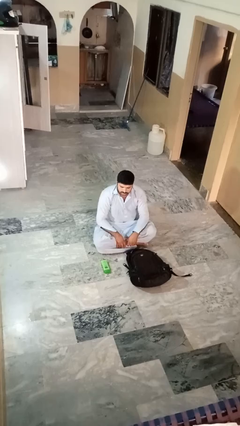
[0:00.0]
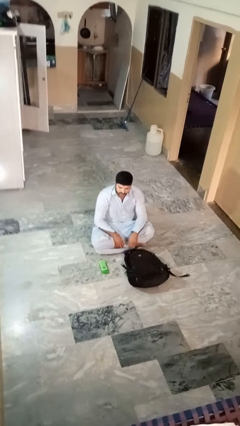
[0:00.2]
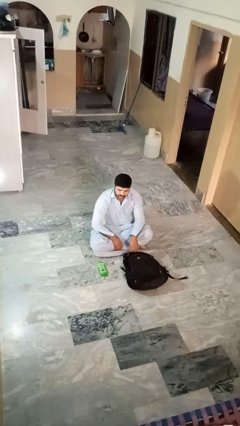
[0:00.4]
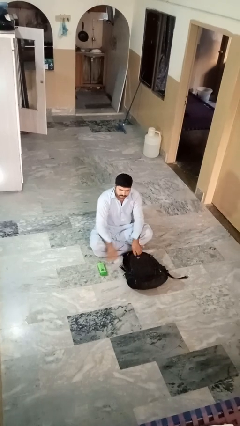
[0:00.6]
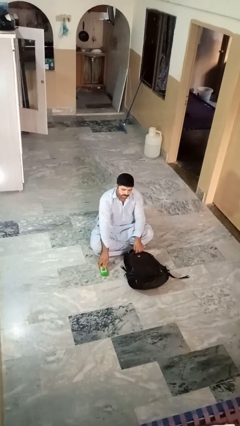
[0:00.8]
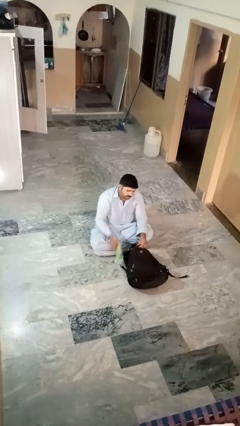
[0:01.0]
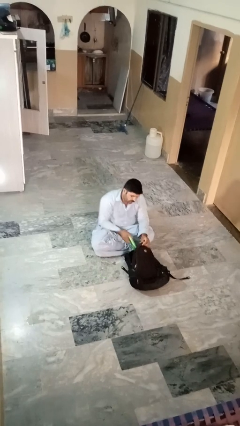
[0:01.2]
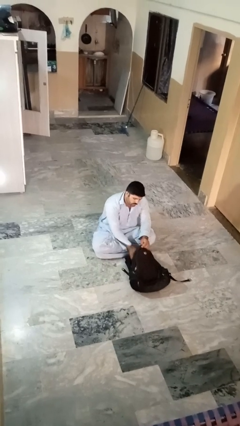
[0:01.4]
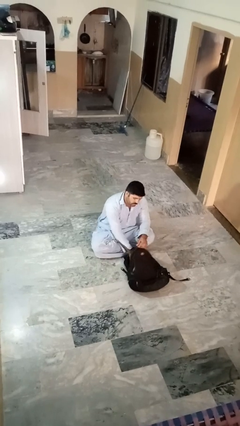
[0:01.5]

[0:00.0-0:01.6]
person puts object into bag

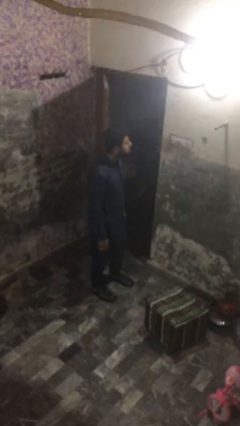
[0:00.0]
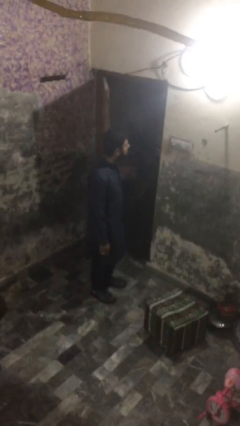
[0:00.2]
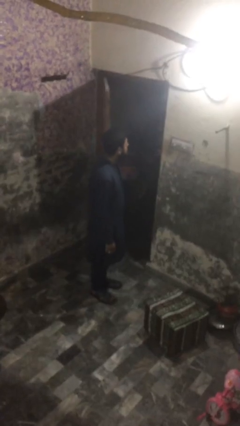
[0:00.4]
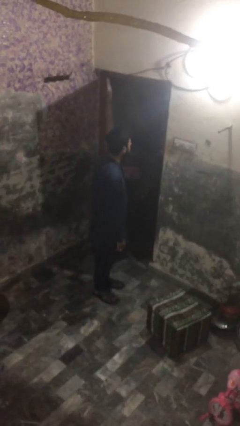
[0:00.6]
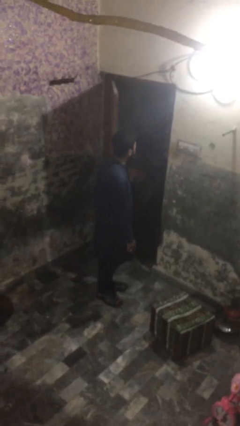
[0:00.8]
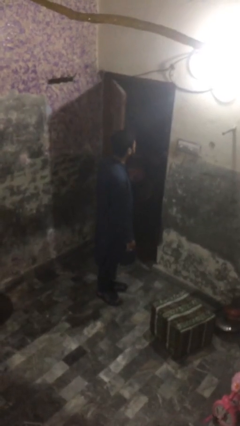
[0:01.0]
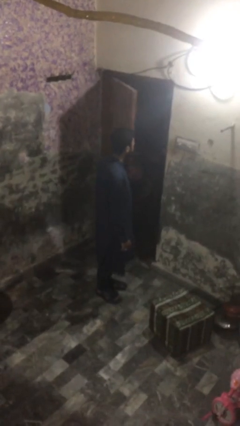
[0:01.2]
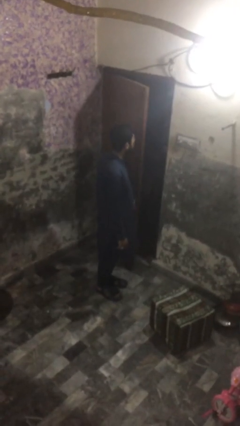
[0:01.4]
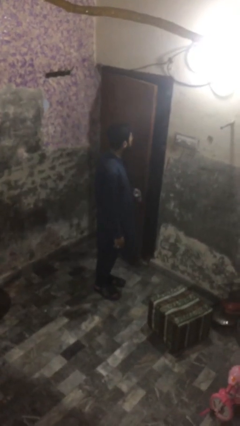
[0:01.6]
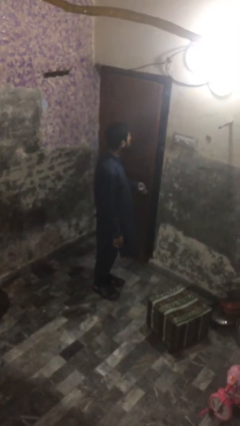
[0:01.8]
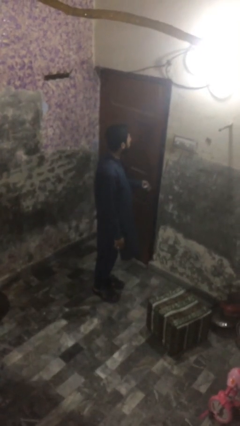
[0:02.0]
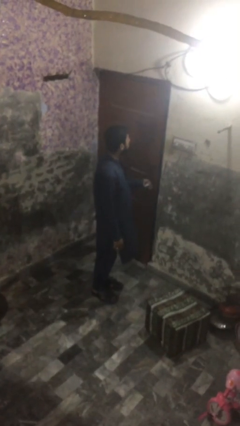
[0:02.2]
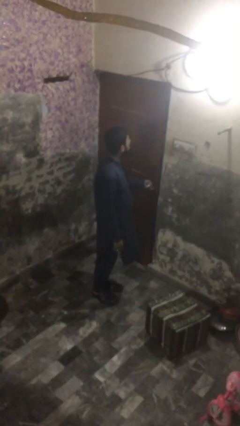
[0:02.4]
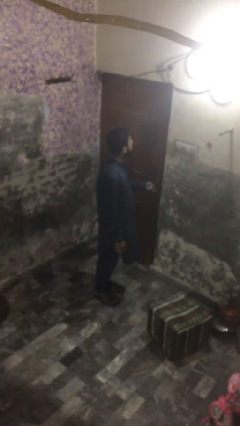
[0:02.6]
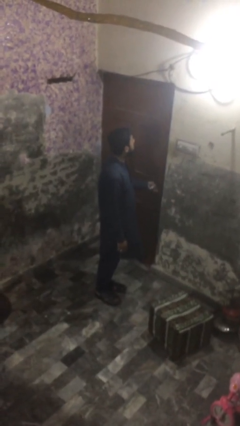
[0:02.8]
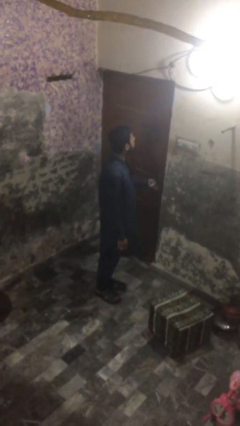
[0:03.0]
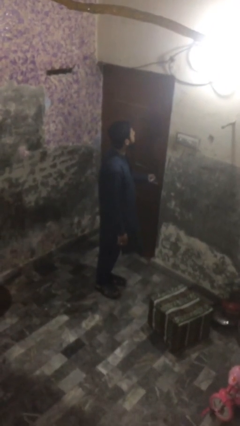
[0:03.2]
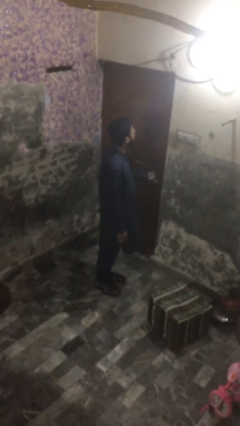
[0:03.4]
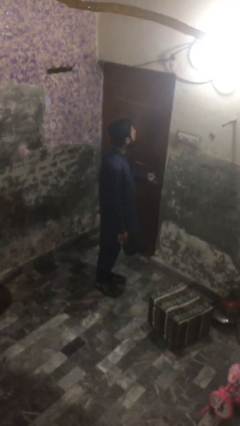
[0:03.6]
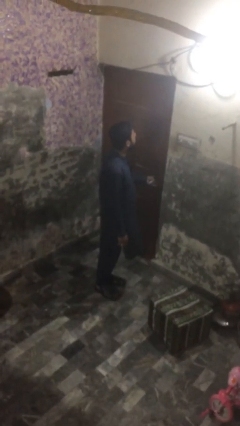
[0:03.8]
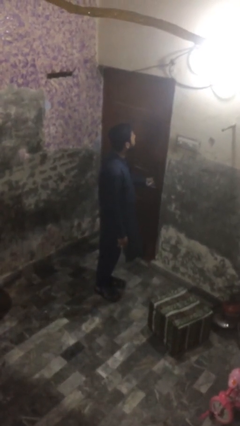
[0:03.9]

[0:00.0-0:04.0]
person closes facility door

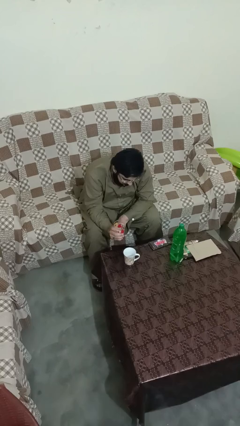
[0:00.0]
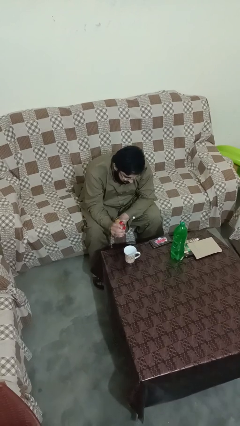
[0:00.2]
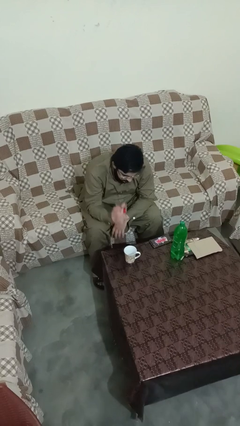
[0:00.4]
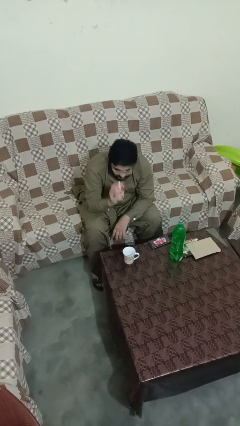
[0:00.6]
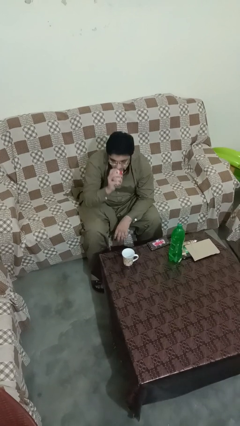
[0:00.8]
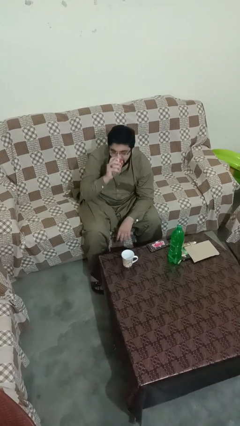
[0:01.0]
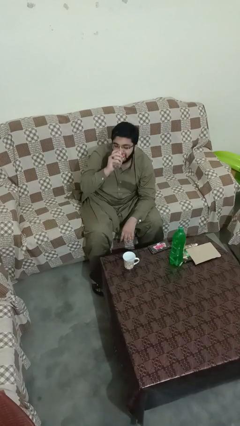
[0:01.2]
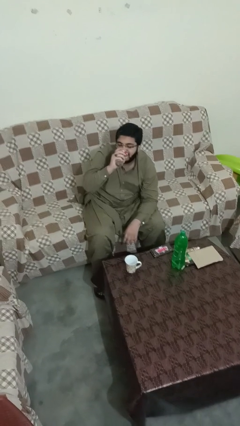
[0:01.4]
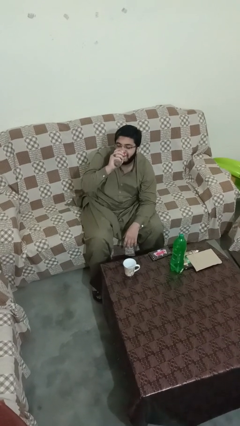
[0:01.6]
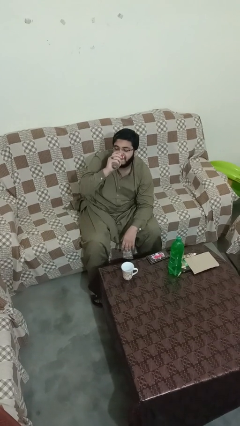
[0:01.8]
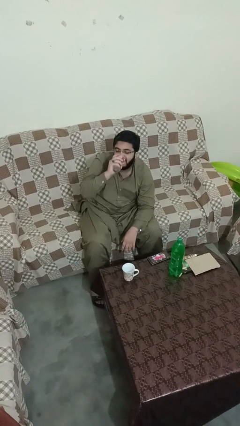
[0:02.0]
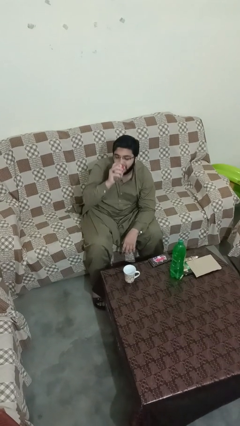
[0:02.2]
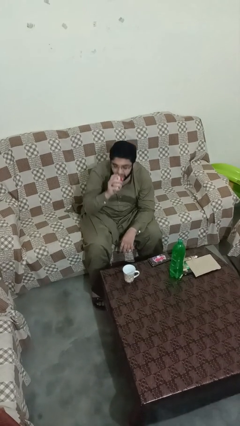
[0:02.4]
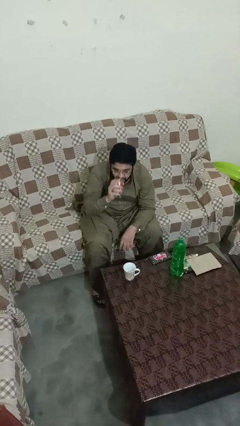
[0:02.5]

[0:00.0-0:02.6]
person drinks from shotglass

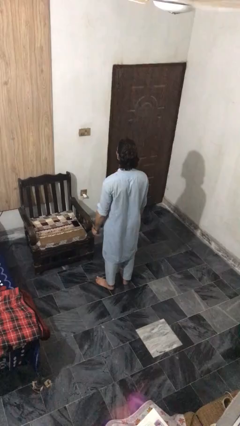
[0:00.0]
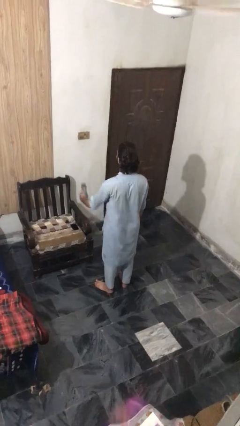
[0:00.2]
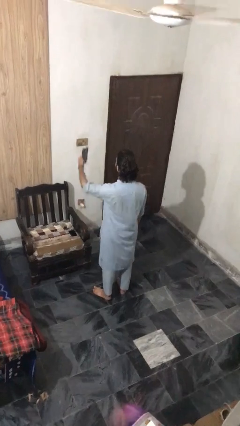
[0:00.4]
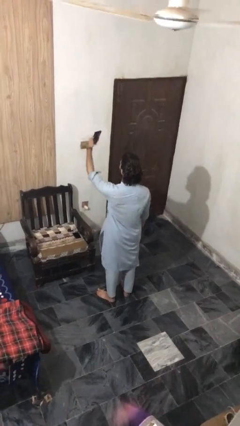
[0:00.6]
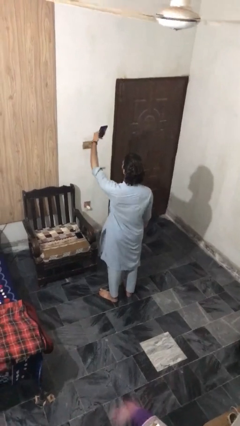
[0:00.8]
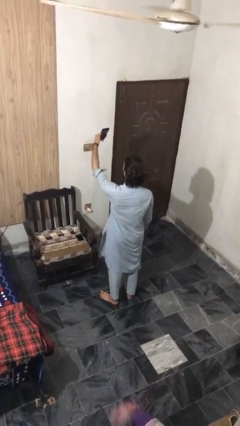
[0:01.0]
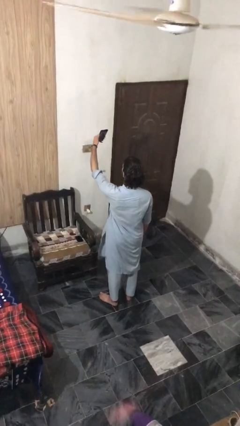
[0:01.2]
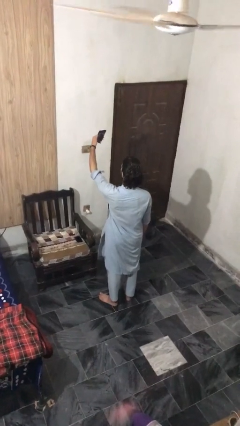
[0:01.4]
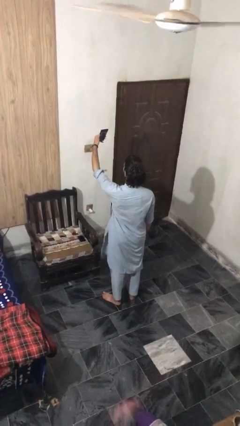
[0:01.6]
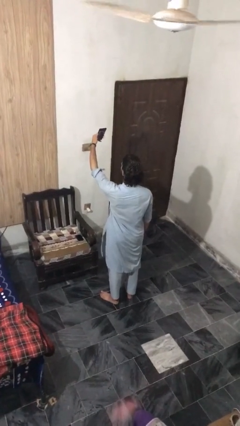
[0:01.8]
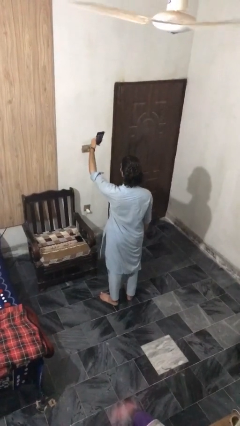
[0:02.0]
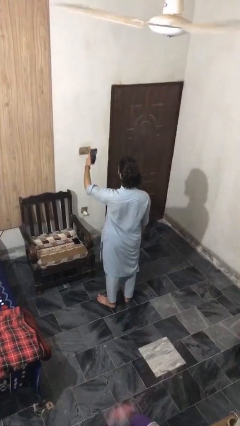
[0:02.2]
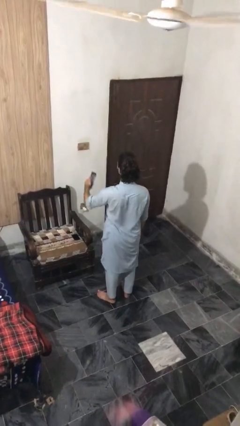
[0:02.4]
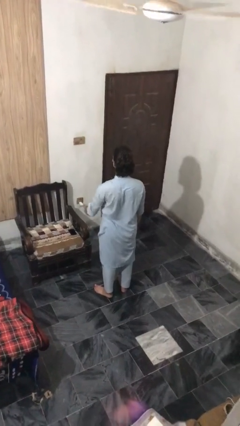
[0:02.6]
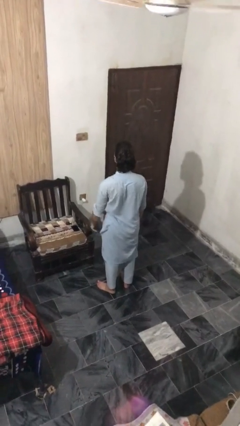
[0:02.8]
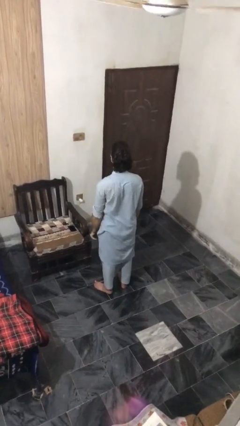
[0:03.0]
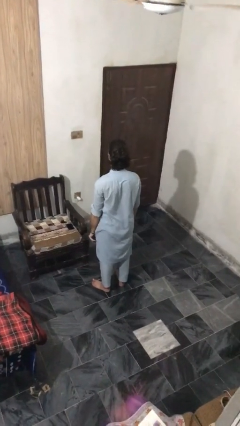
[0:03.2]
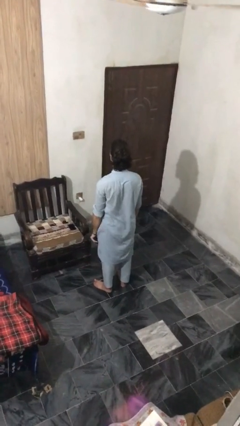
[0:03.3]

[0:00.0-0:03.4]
person takes selfie

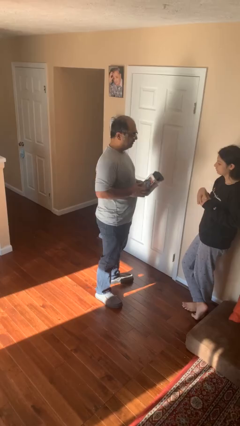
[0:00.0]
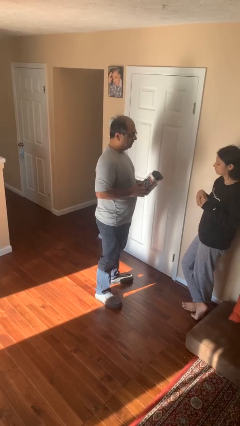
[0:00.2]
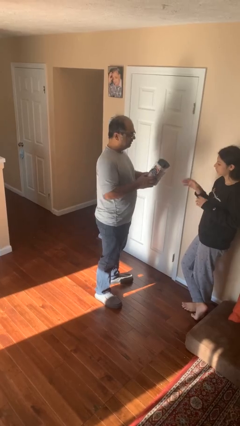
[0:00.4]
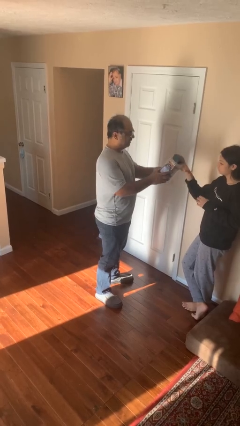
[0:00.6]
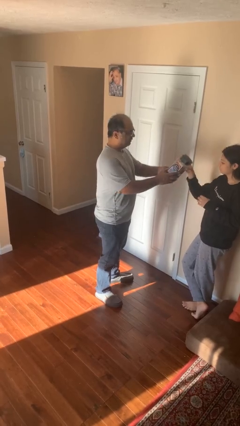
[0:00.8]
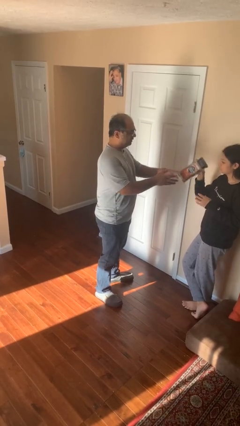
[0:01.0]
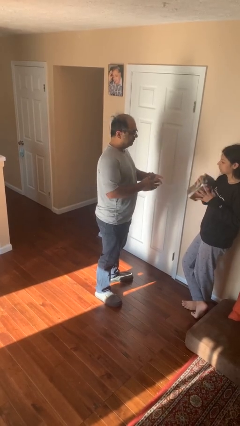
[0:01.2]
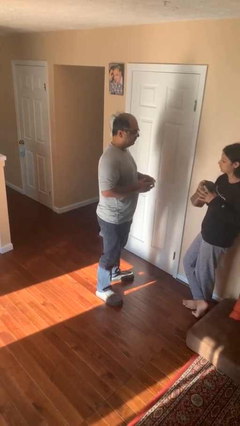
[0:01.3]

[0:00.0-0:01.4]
person transfers object to person

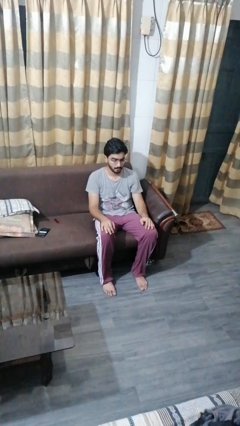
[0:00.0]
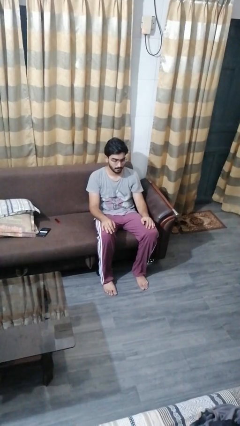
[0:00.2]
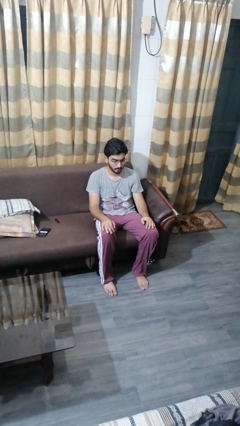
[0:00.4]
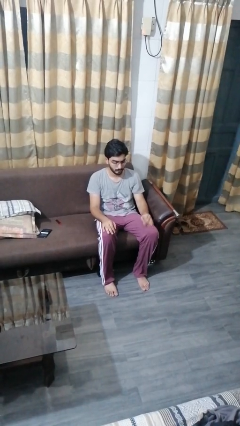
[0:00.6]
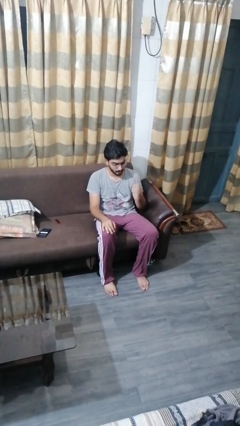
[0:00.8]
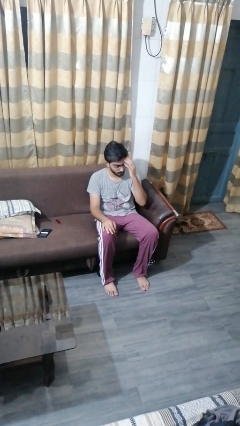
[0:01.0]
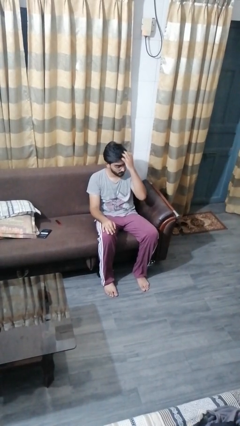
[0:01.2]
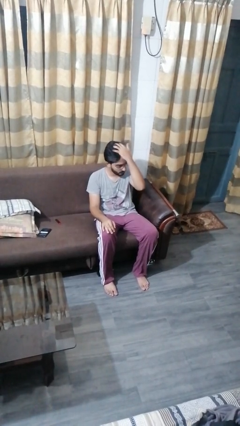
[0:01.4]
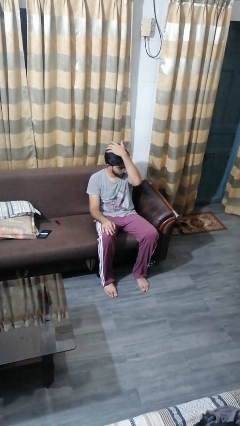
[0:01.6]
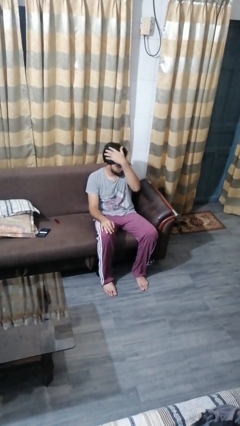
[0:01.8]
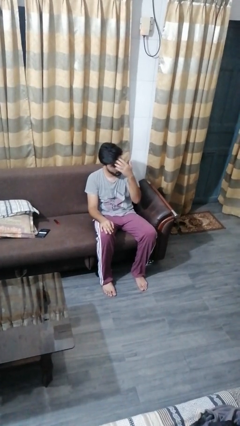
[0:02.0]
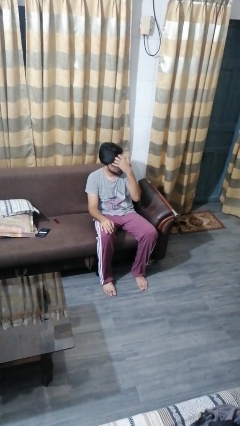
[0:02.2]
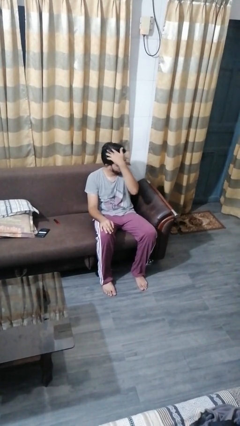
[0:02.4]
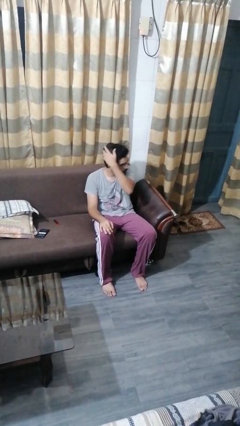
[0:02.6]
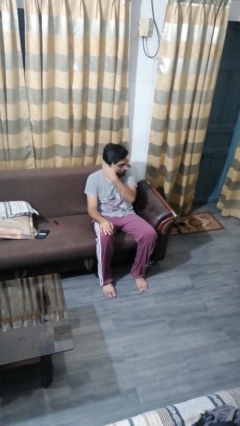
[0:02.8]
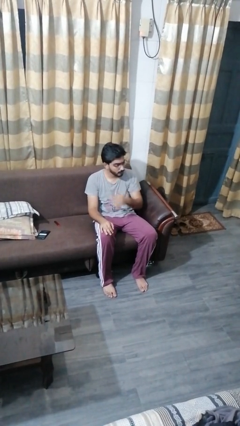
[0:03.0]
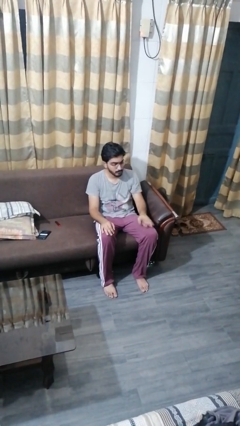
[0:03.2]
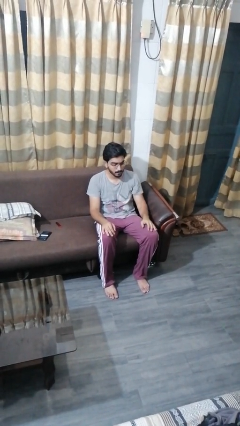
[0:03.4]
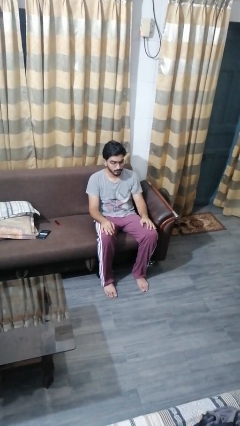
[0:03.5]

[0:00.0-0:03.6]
person strokes hair

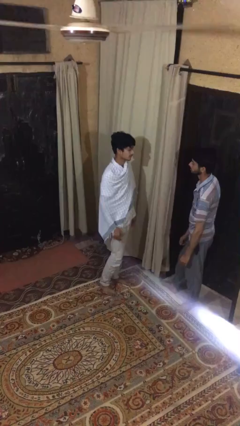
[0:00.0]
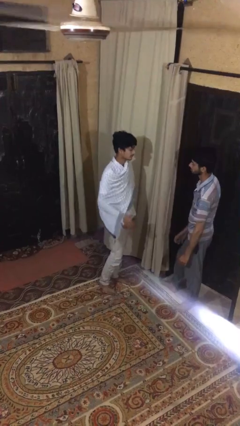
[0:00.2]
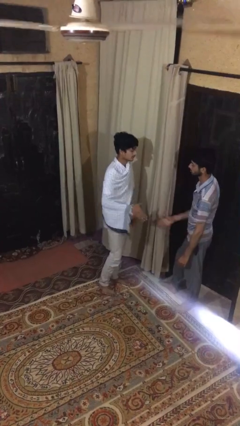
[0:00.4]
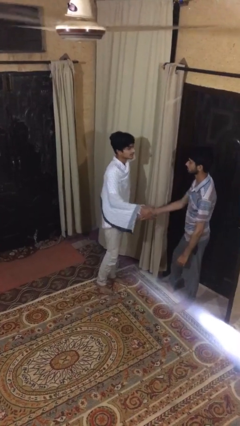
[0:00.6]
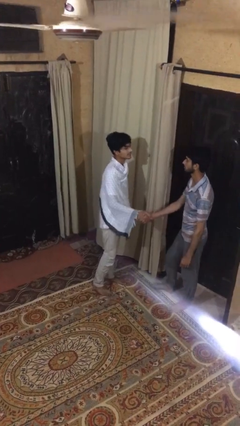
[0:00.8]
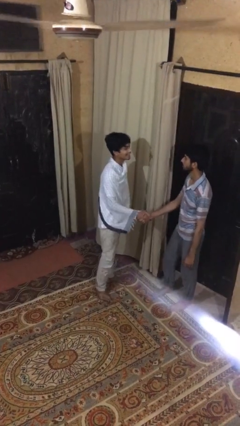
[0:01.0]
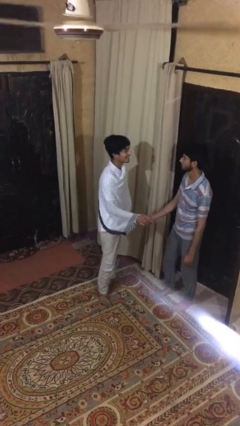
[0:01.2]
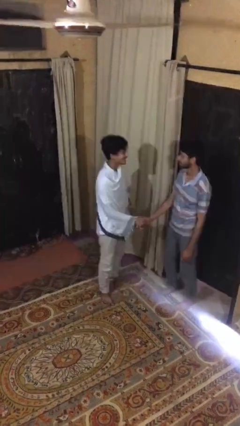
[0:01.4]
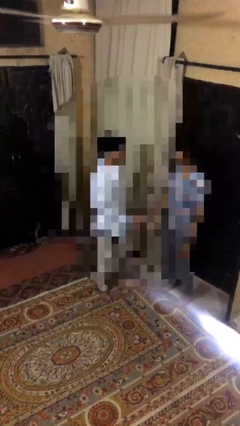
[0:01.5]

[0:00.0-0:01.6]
person shakes hand
